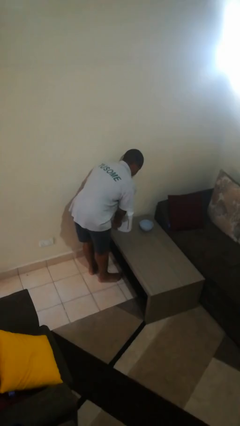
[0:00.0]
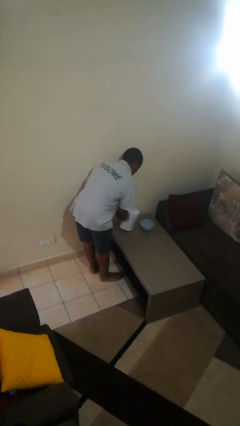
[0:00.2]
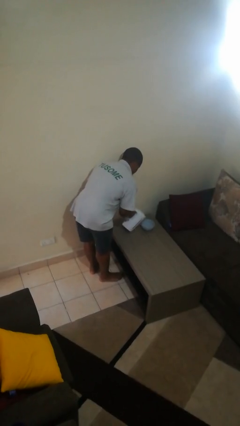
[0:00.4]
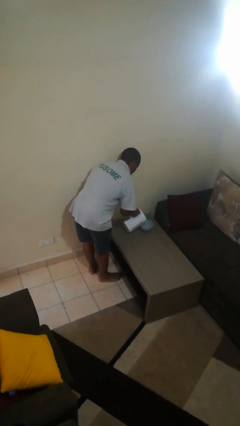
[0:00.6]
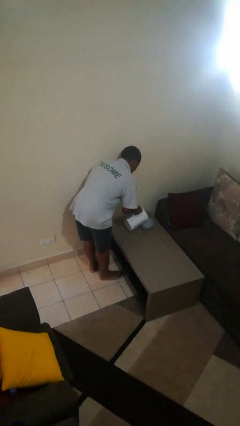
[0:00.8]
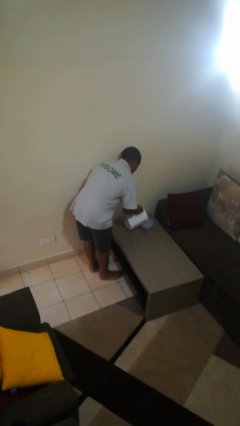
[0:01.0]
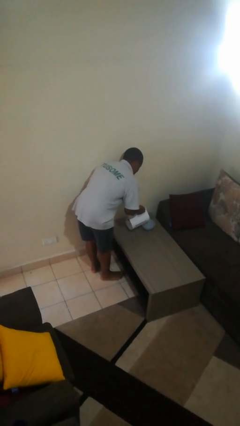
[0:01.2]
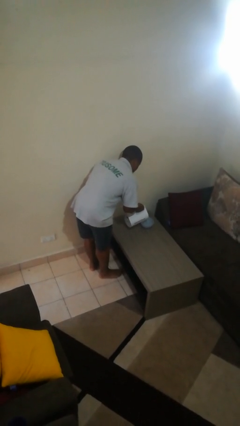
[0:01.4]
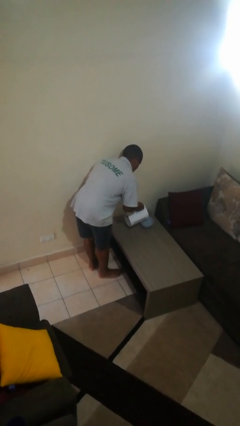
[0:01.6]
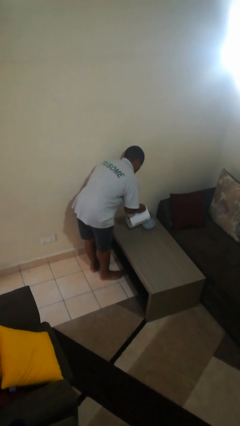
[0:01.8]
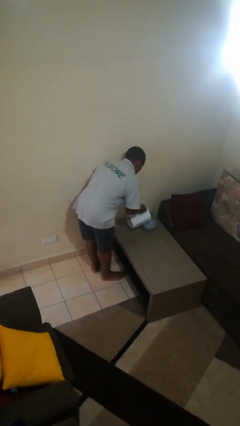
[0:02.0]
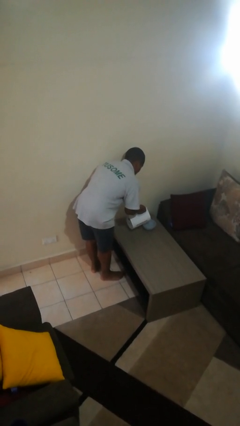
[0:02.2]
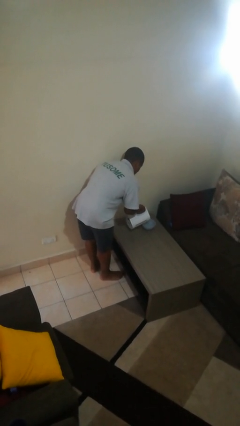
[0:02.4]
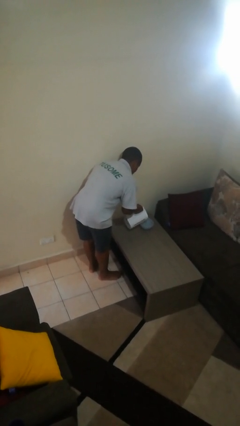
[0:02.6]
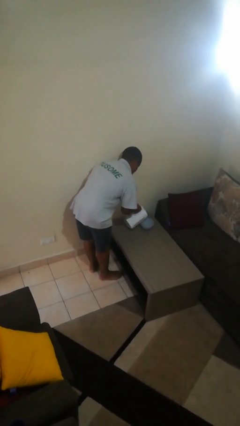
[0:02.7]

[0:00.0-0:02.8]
person pours into bowl

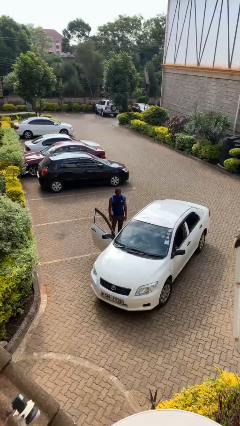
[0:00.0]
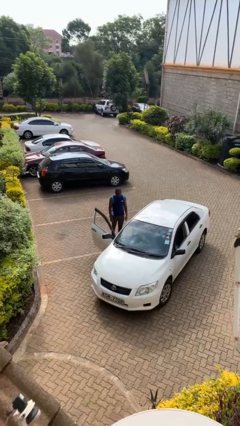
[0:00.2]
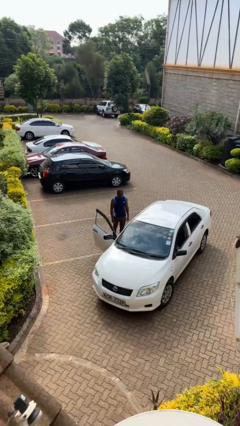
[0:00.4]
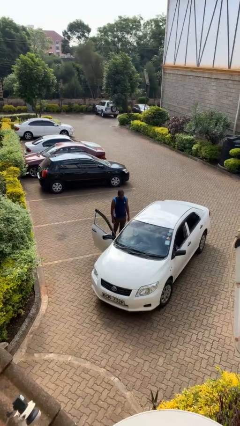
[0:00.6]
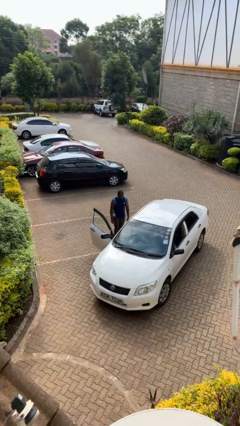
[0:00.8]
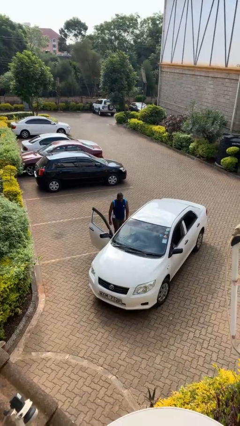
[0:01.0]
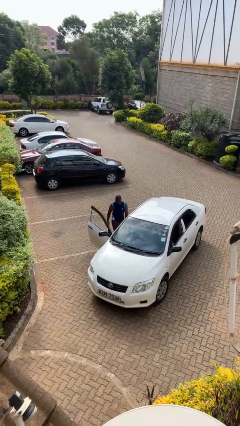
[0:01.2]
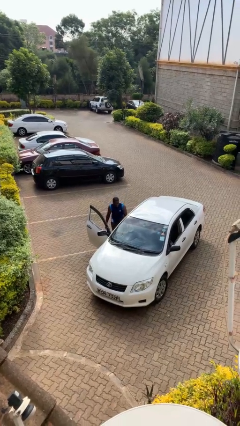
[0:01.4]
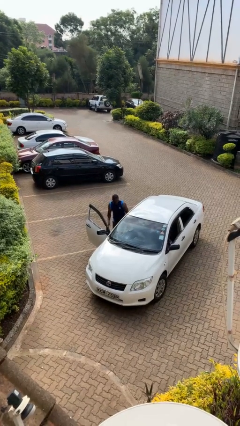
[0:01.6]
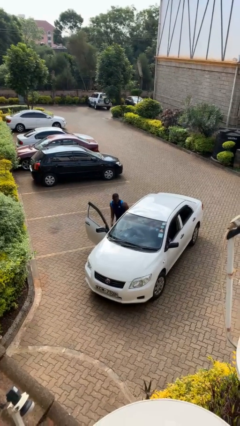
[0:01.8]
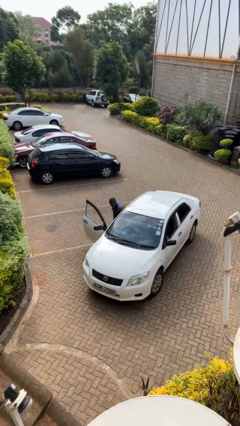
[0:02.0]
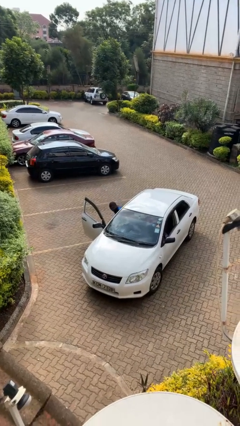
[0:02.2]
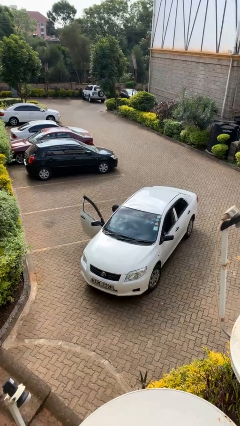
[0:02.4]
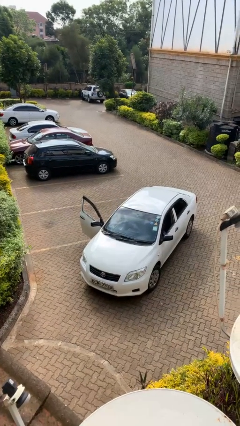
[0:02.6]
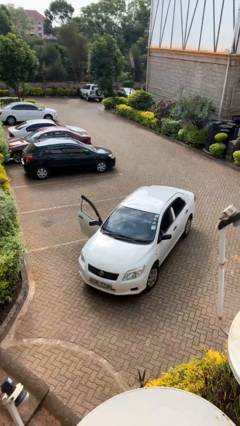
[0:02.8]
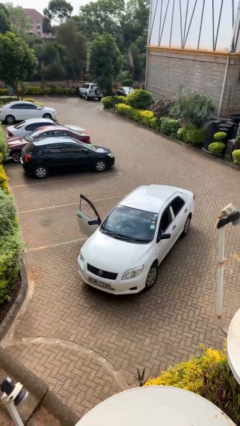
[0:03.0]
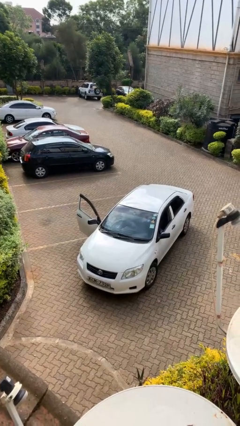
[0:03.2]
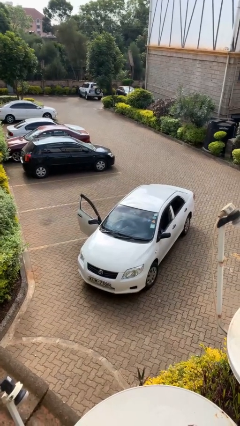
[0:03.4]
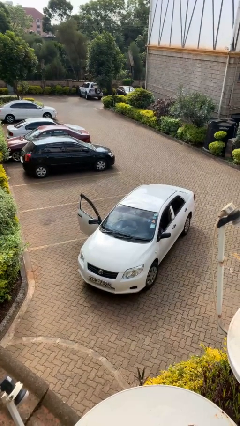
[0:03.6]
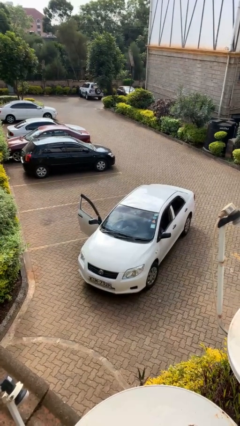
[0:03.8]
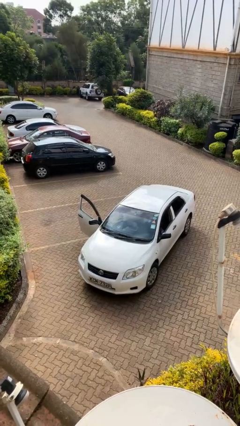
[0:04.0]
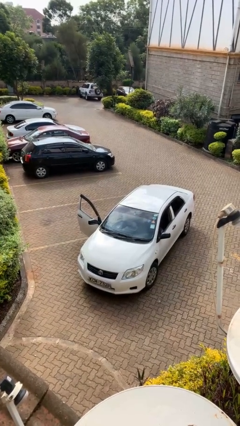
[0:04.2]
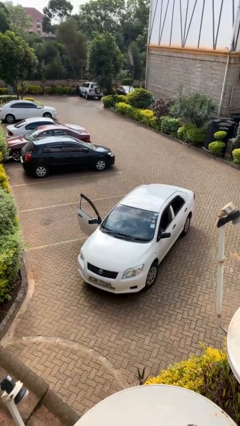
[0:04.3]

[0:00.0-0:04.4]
person enters car

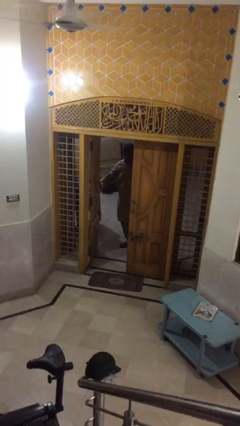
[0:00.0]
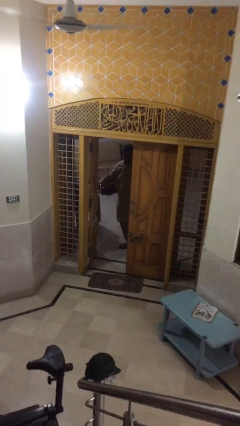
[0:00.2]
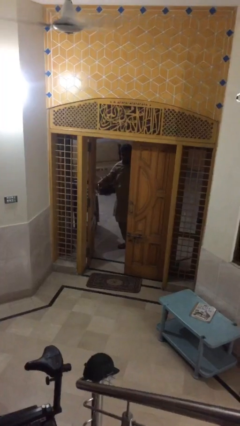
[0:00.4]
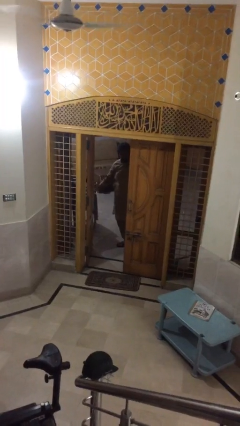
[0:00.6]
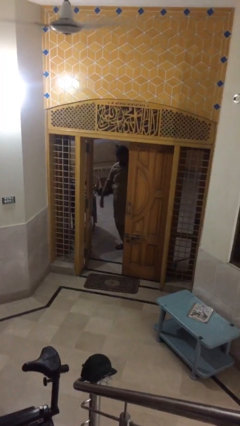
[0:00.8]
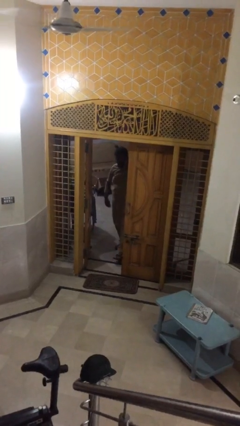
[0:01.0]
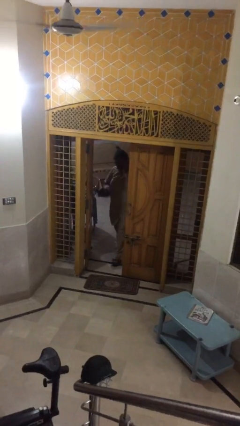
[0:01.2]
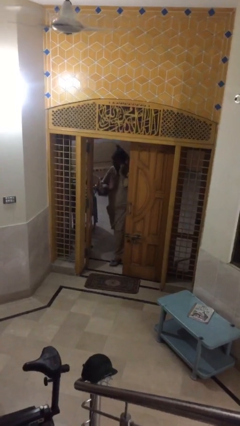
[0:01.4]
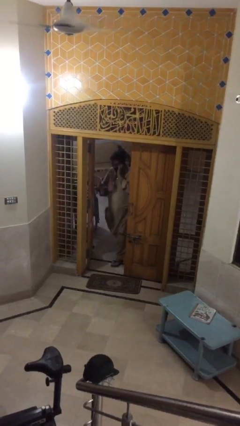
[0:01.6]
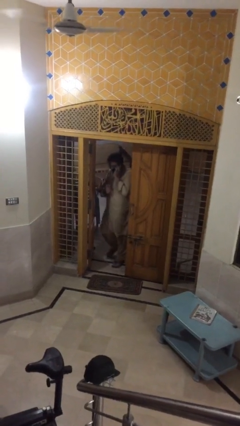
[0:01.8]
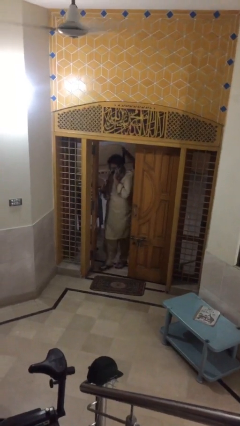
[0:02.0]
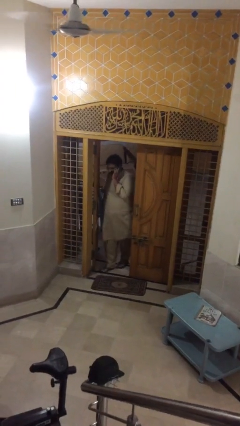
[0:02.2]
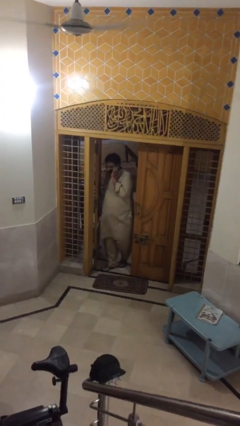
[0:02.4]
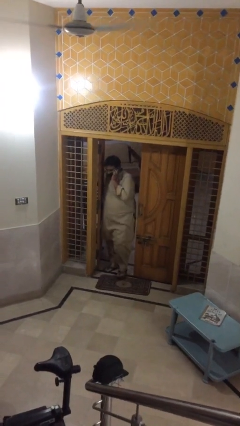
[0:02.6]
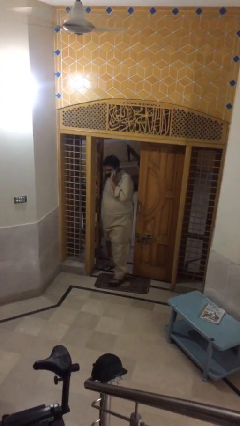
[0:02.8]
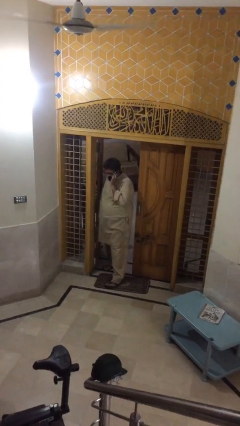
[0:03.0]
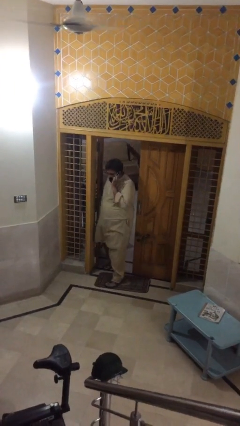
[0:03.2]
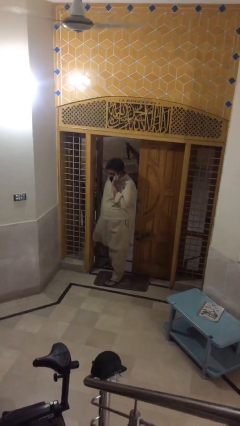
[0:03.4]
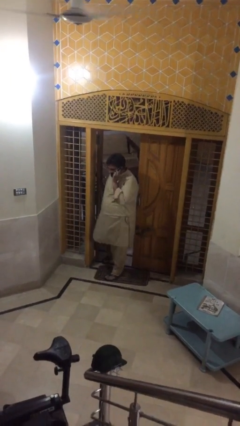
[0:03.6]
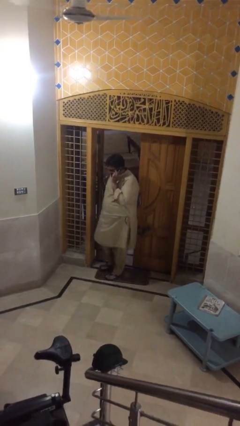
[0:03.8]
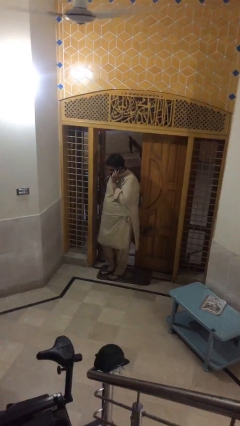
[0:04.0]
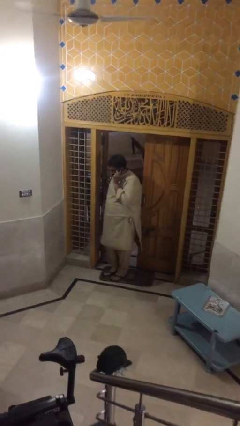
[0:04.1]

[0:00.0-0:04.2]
person enters scene through structure

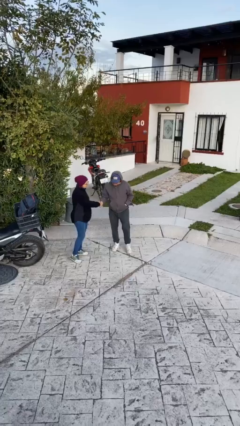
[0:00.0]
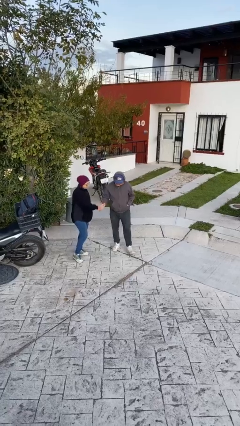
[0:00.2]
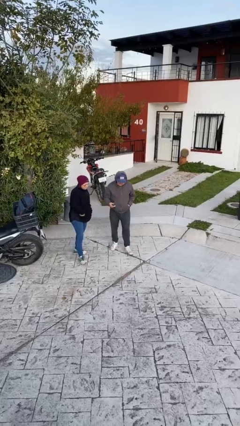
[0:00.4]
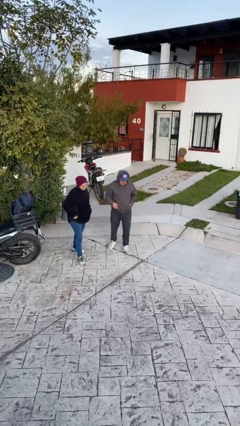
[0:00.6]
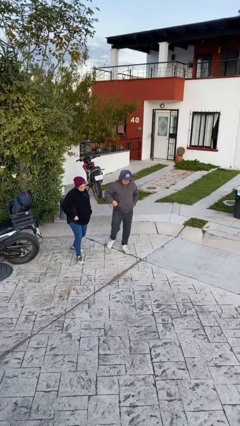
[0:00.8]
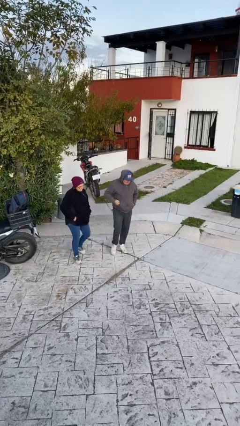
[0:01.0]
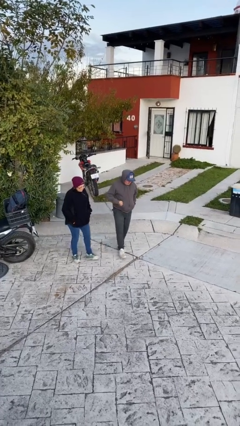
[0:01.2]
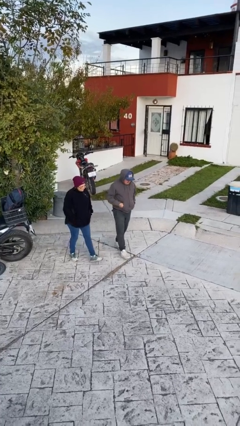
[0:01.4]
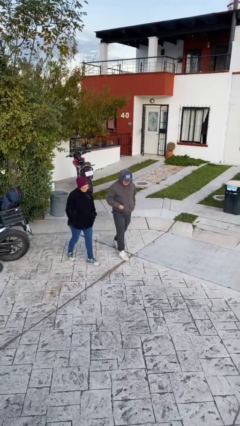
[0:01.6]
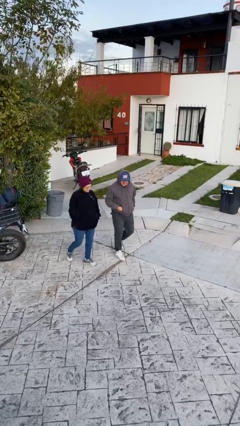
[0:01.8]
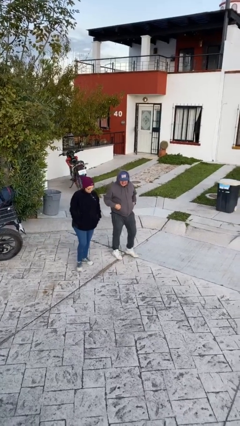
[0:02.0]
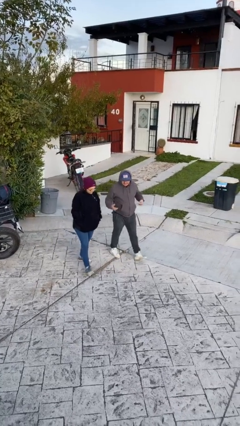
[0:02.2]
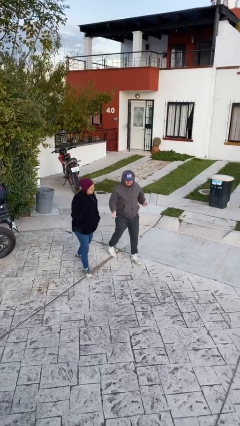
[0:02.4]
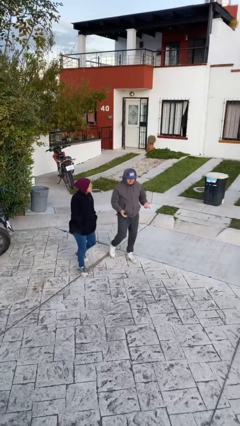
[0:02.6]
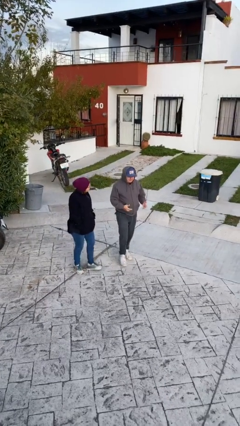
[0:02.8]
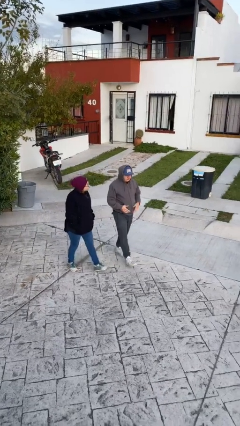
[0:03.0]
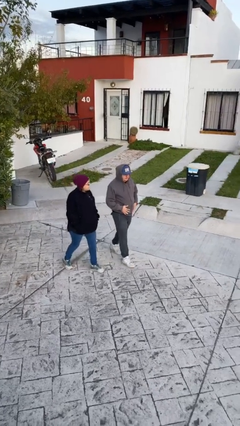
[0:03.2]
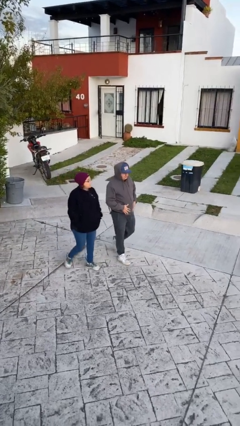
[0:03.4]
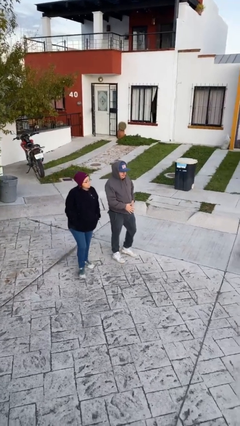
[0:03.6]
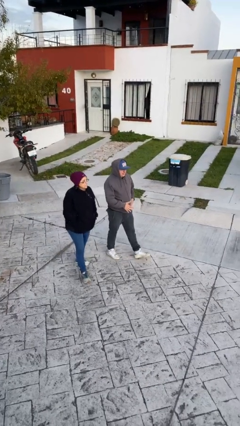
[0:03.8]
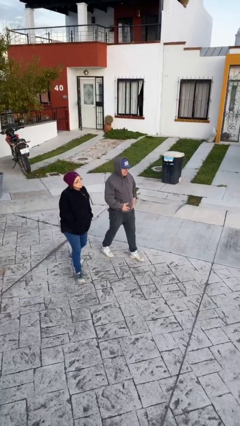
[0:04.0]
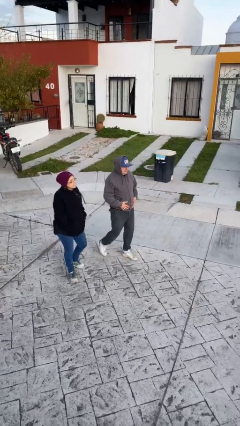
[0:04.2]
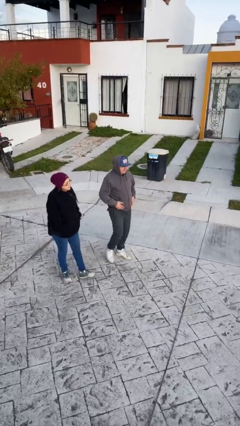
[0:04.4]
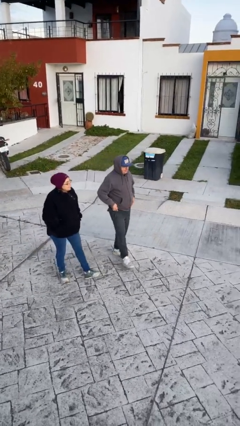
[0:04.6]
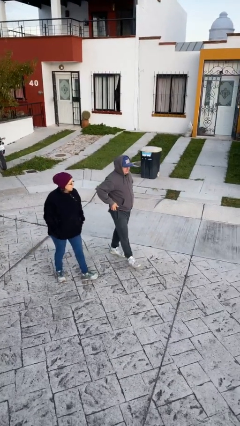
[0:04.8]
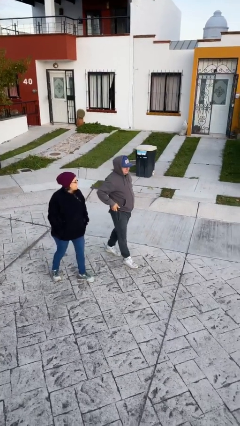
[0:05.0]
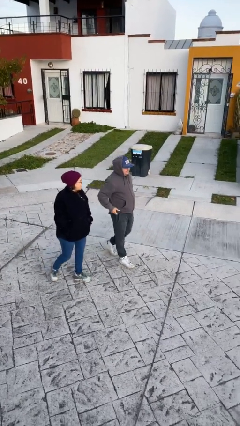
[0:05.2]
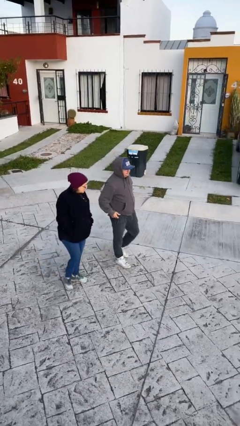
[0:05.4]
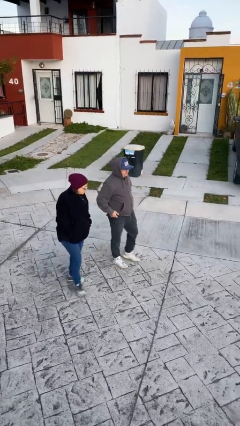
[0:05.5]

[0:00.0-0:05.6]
person talks to person

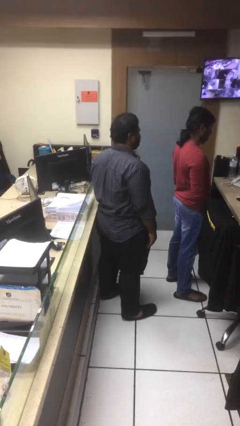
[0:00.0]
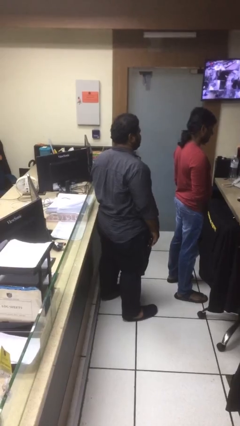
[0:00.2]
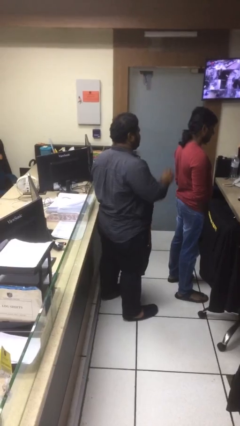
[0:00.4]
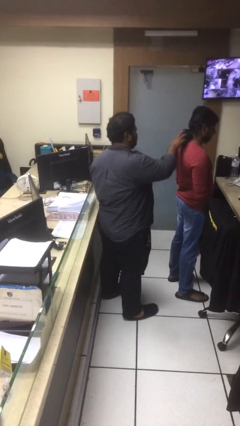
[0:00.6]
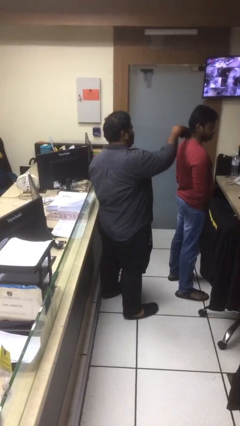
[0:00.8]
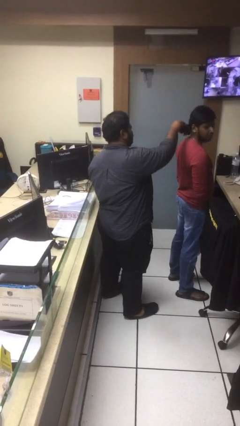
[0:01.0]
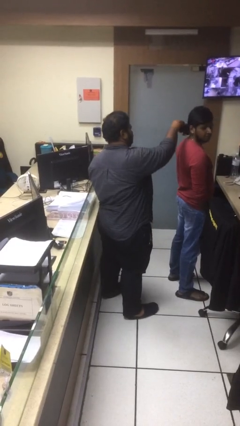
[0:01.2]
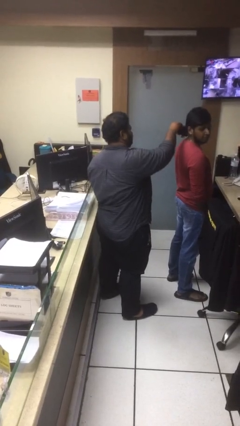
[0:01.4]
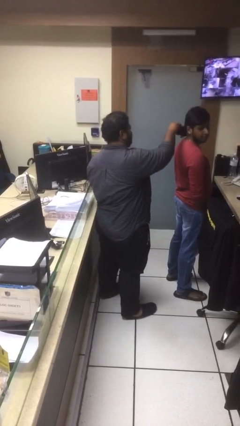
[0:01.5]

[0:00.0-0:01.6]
person grabs person by hair
